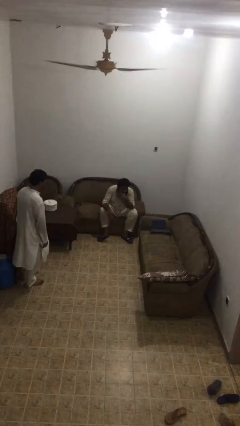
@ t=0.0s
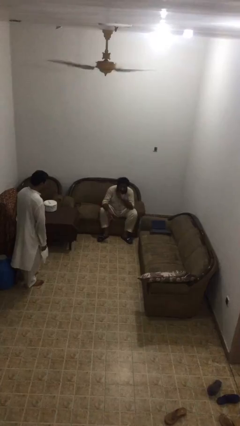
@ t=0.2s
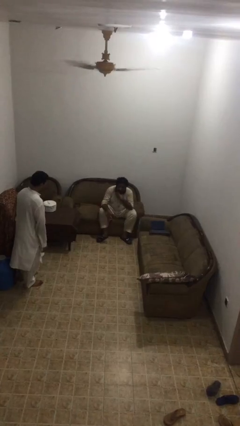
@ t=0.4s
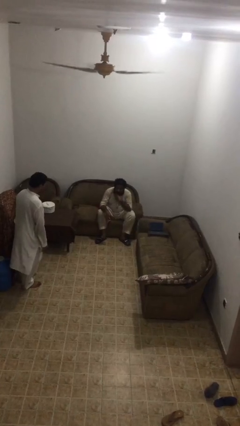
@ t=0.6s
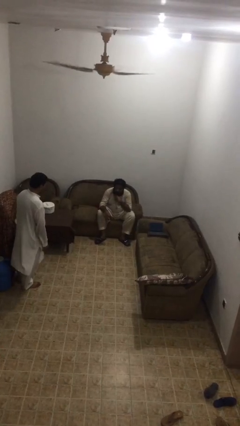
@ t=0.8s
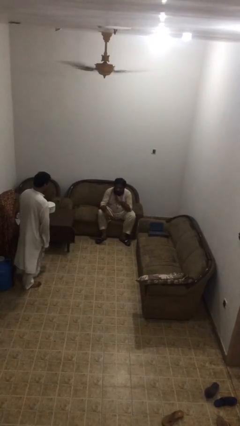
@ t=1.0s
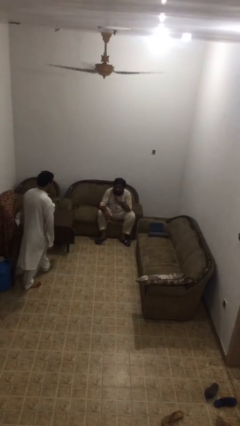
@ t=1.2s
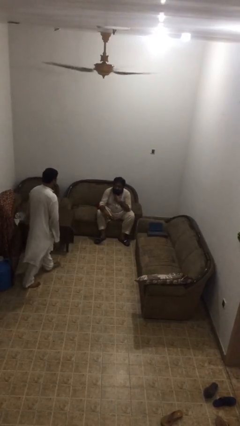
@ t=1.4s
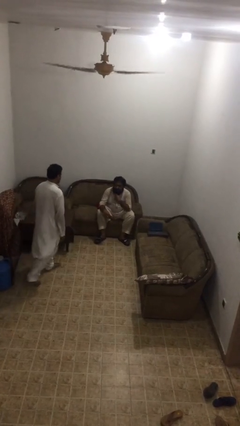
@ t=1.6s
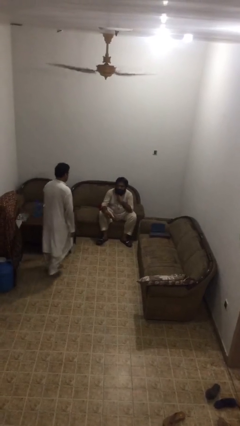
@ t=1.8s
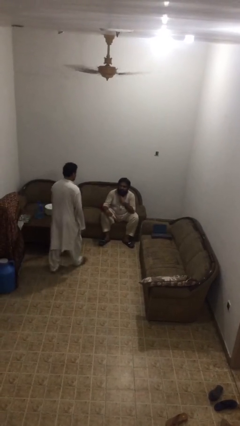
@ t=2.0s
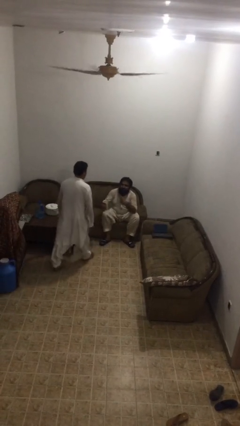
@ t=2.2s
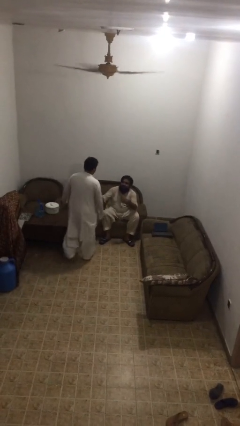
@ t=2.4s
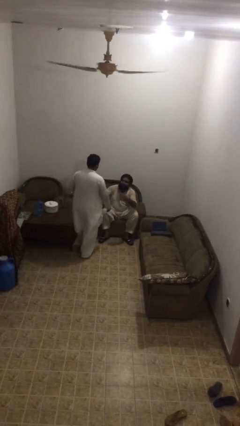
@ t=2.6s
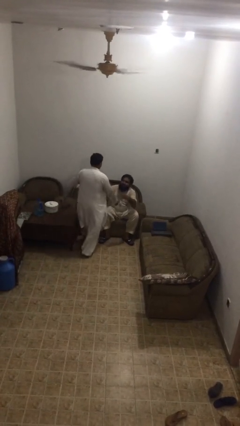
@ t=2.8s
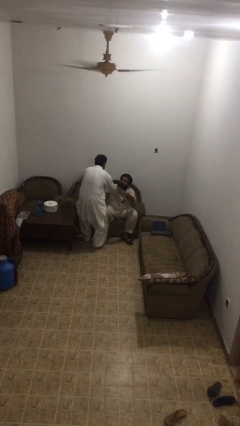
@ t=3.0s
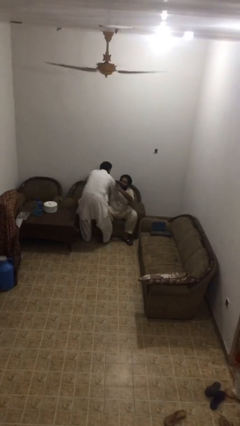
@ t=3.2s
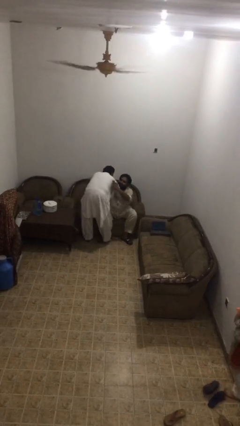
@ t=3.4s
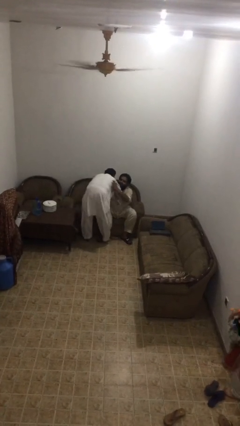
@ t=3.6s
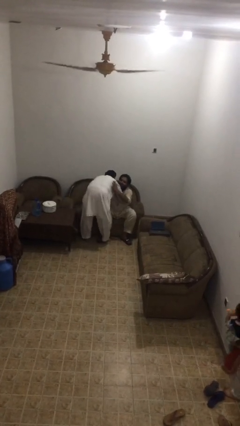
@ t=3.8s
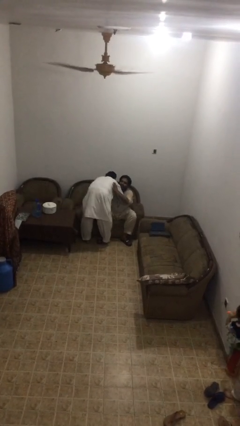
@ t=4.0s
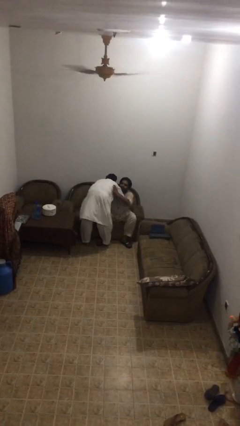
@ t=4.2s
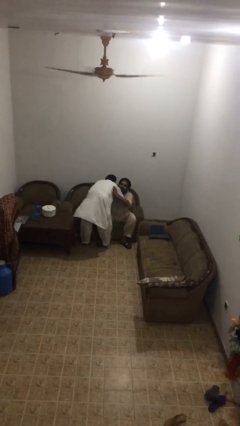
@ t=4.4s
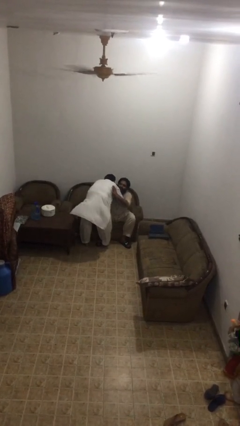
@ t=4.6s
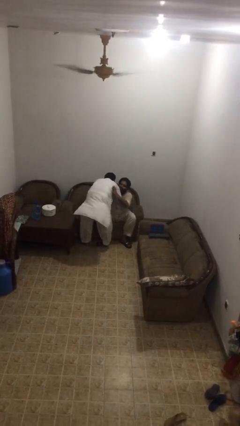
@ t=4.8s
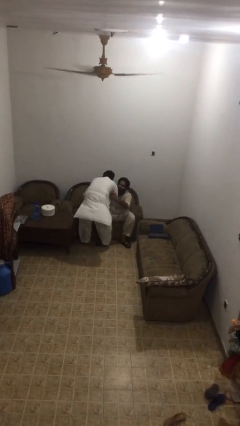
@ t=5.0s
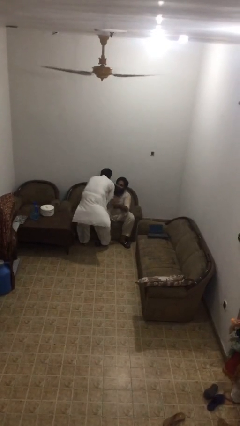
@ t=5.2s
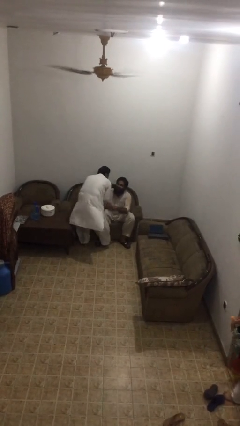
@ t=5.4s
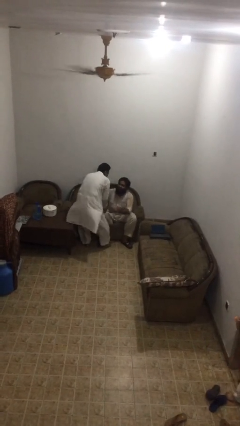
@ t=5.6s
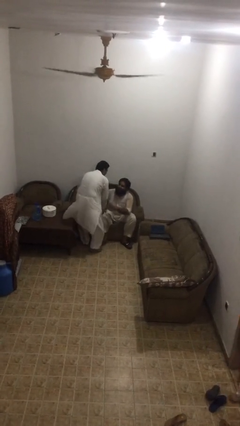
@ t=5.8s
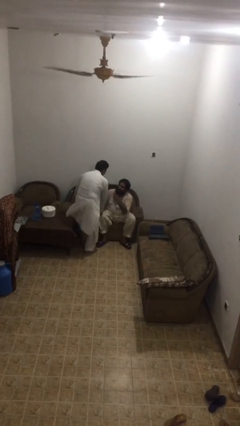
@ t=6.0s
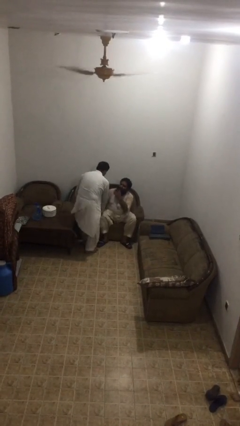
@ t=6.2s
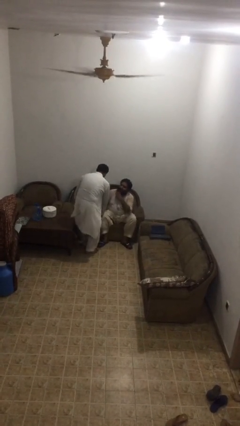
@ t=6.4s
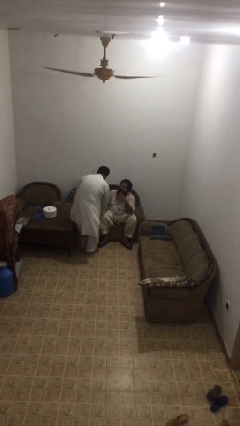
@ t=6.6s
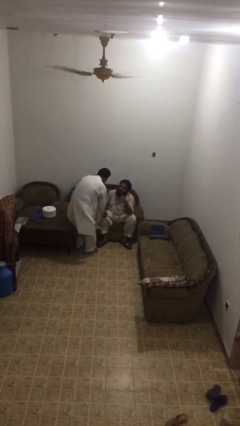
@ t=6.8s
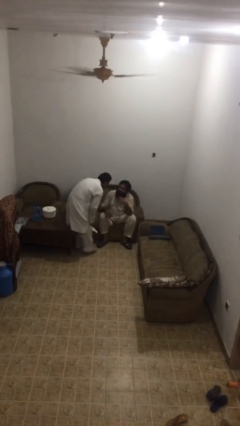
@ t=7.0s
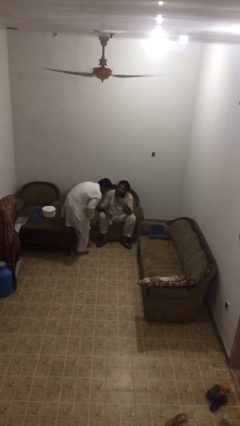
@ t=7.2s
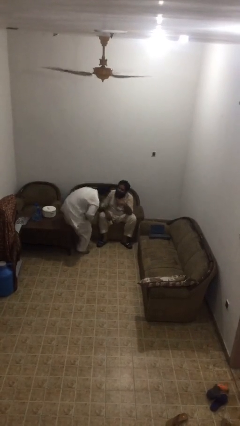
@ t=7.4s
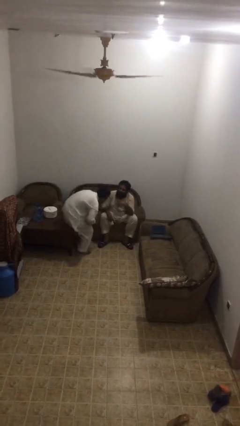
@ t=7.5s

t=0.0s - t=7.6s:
person embraces person

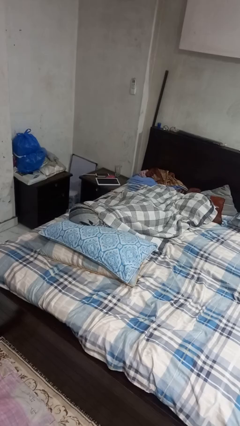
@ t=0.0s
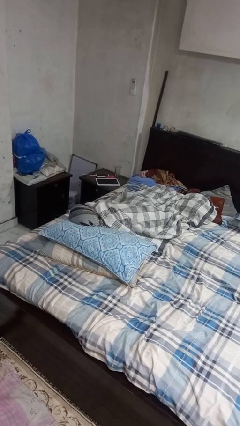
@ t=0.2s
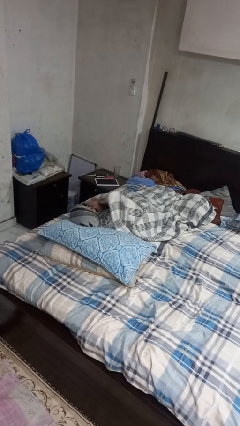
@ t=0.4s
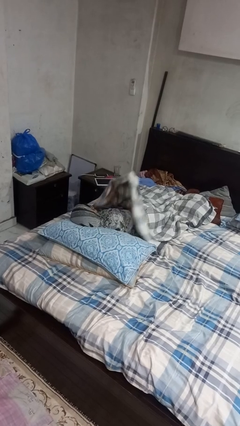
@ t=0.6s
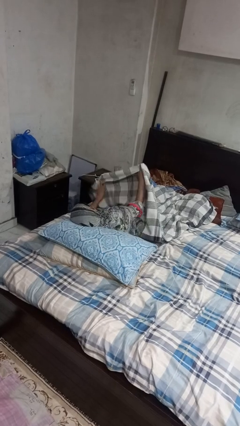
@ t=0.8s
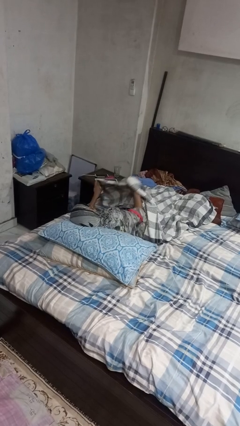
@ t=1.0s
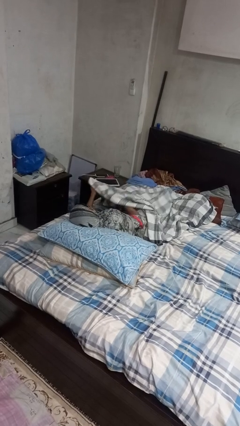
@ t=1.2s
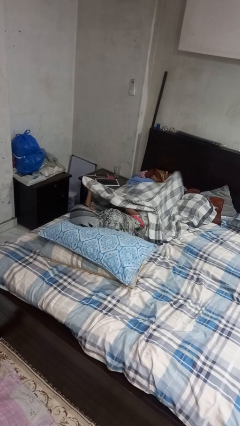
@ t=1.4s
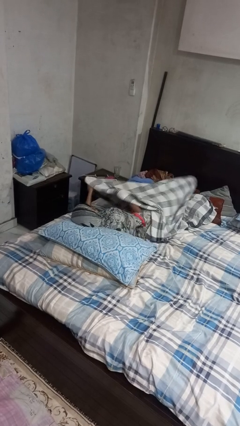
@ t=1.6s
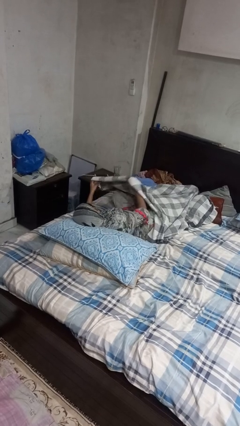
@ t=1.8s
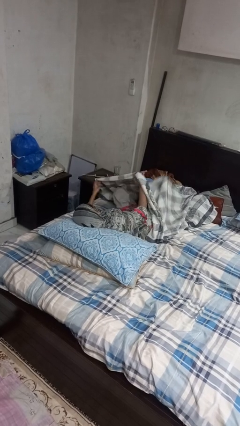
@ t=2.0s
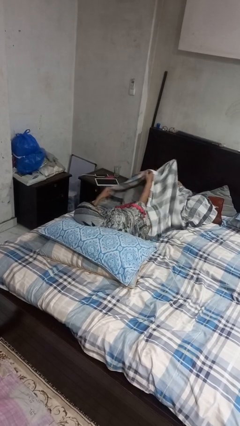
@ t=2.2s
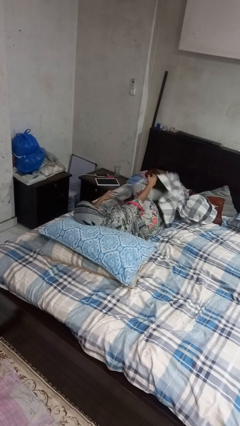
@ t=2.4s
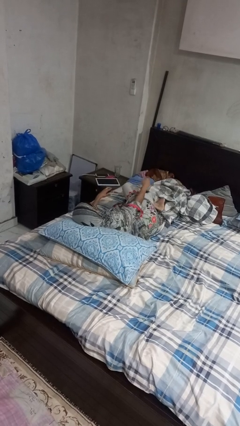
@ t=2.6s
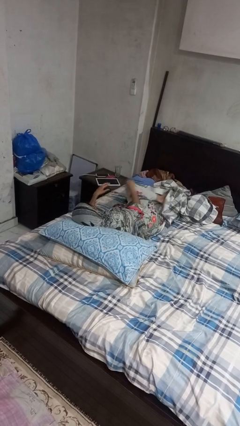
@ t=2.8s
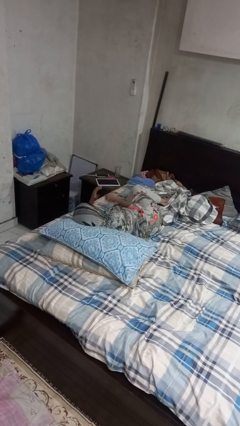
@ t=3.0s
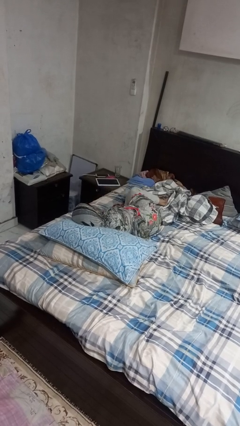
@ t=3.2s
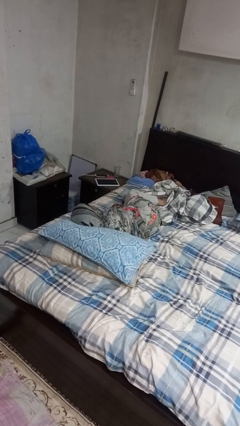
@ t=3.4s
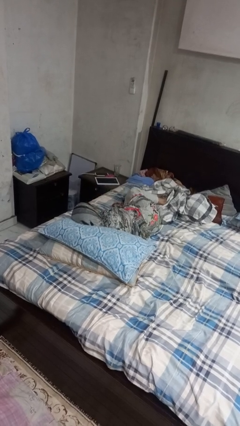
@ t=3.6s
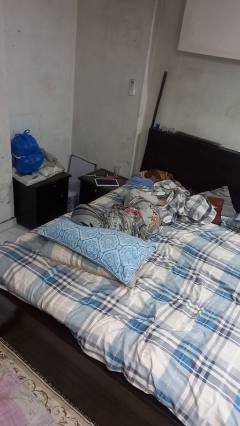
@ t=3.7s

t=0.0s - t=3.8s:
person uncovers with bedsheets

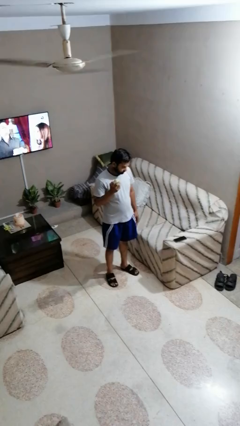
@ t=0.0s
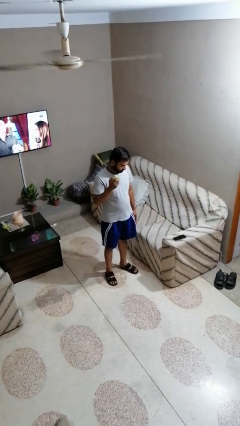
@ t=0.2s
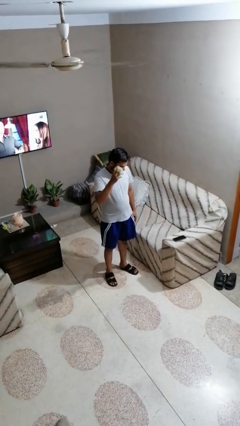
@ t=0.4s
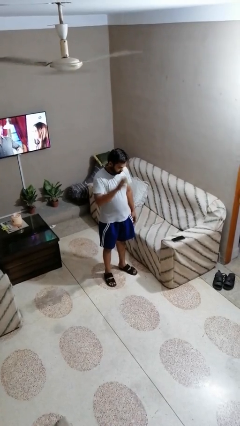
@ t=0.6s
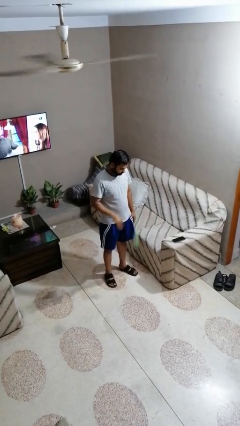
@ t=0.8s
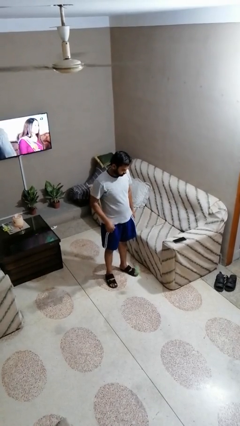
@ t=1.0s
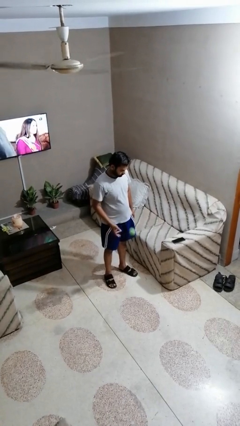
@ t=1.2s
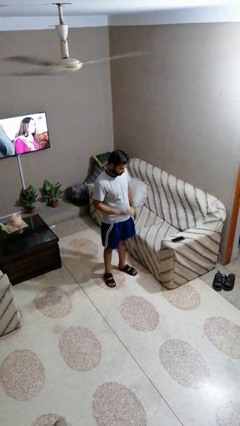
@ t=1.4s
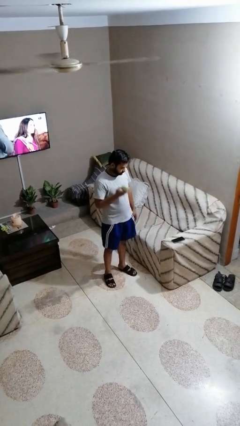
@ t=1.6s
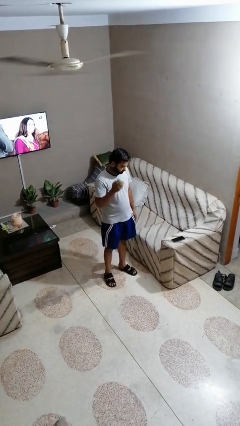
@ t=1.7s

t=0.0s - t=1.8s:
person bounces ball on floor

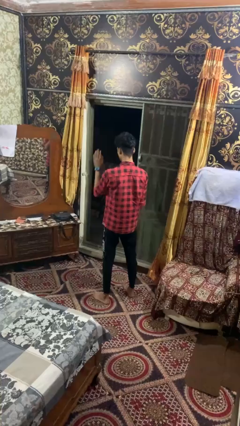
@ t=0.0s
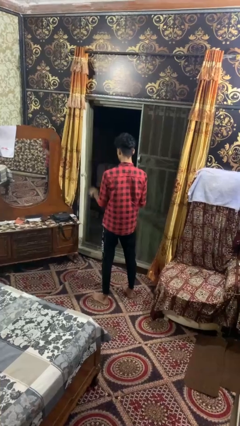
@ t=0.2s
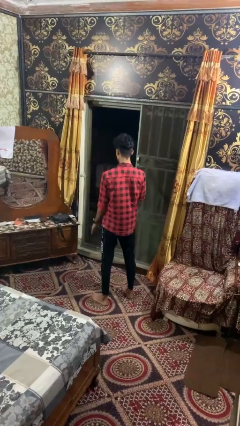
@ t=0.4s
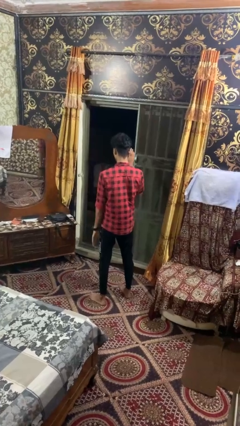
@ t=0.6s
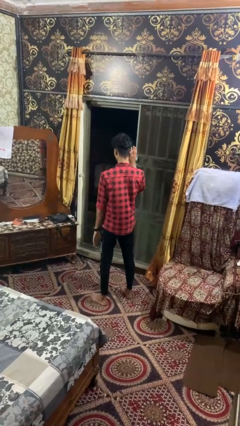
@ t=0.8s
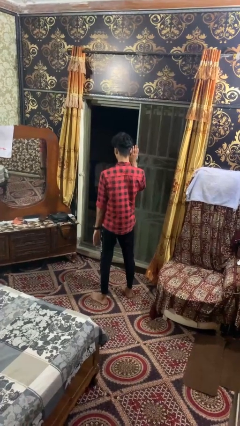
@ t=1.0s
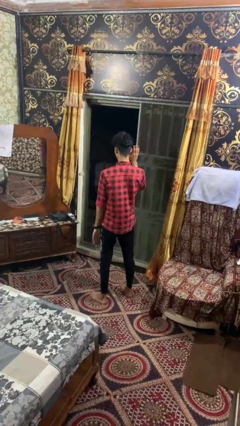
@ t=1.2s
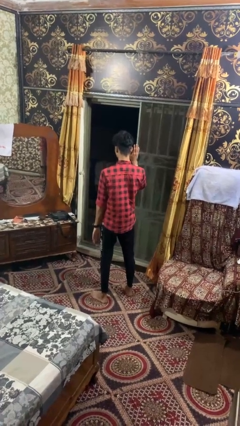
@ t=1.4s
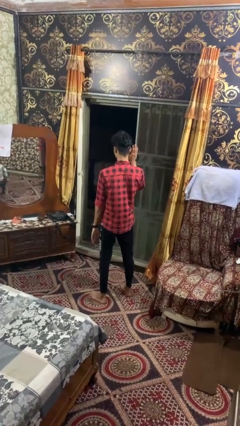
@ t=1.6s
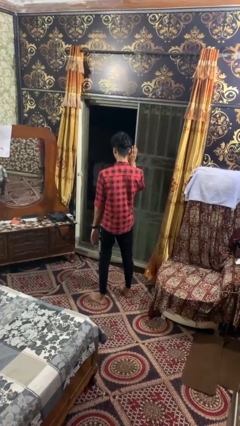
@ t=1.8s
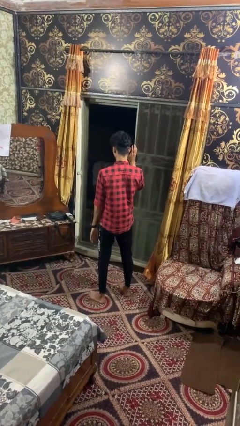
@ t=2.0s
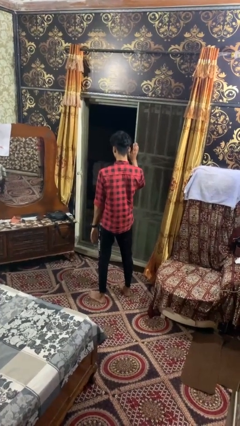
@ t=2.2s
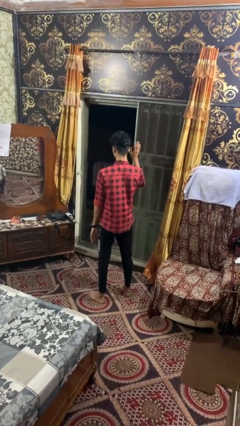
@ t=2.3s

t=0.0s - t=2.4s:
person gestures swipe right

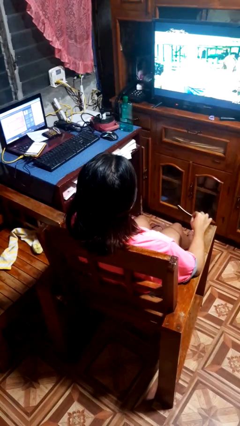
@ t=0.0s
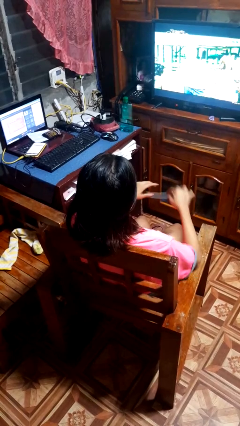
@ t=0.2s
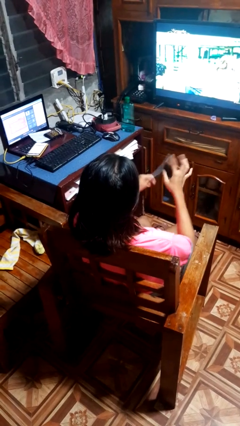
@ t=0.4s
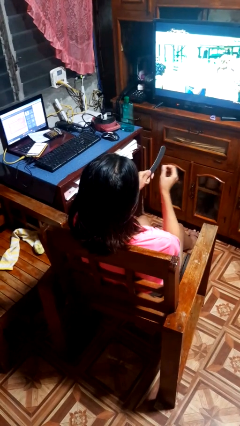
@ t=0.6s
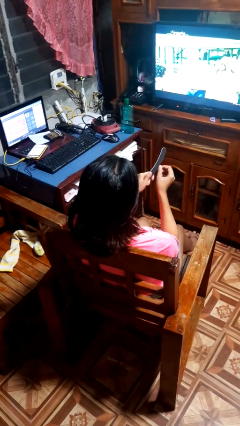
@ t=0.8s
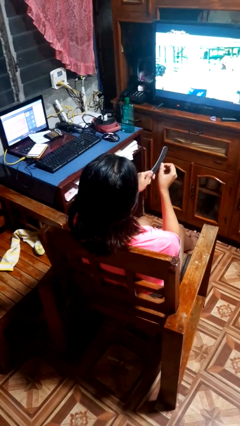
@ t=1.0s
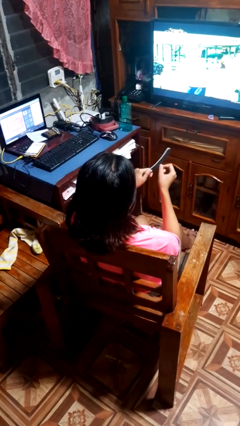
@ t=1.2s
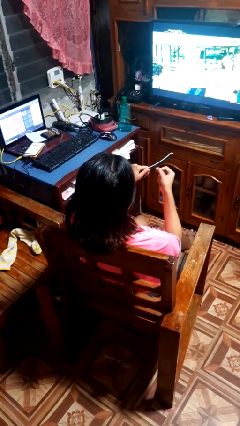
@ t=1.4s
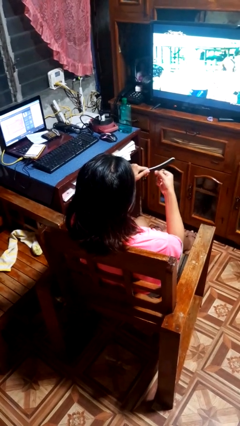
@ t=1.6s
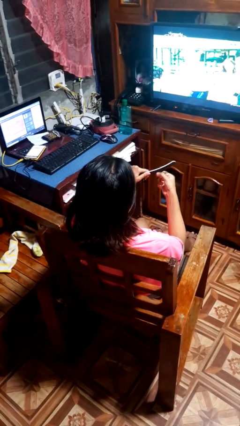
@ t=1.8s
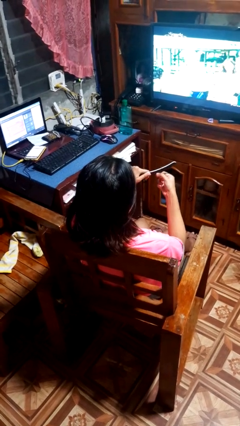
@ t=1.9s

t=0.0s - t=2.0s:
person files fingernails
